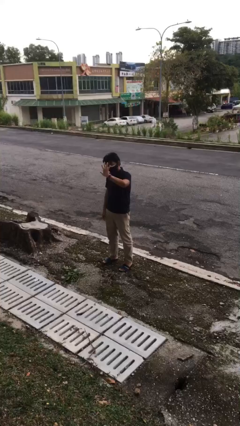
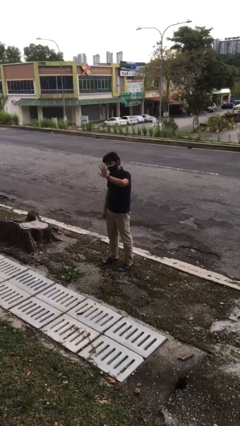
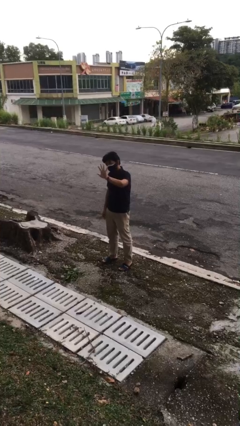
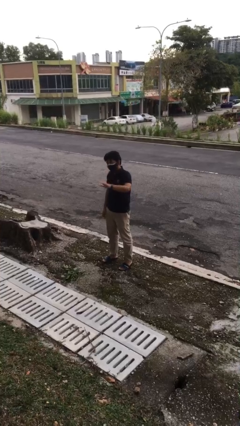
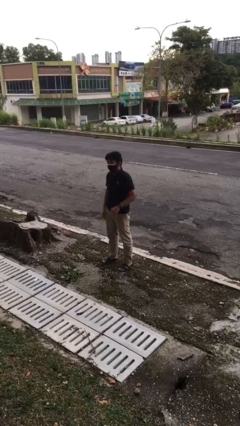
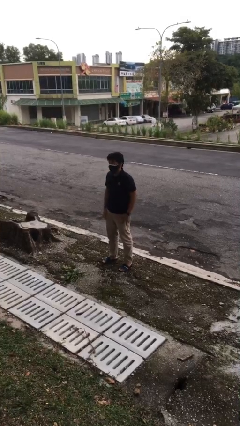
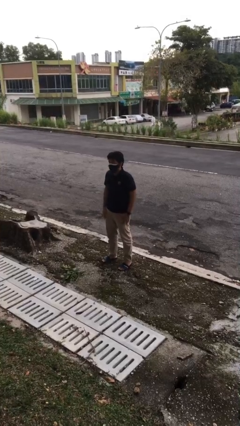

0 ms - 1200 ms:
person gestures number five

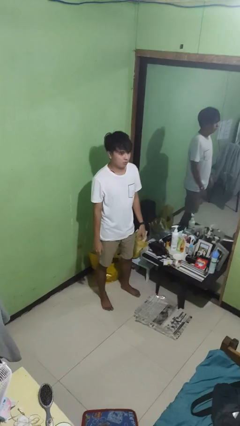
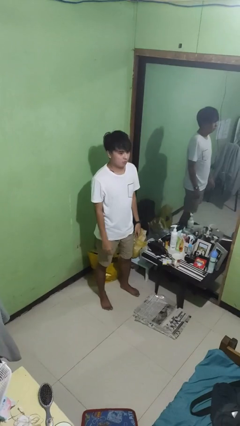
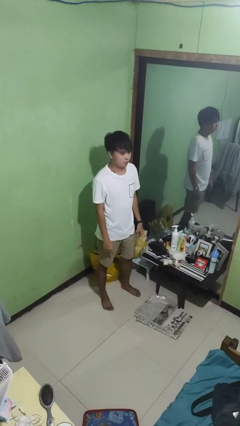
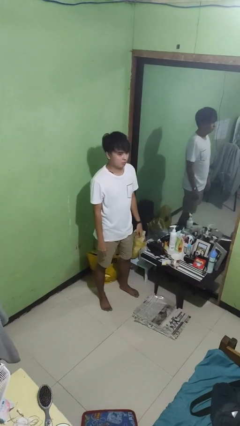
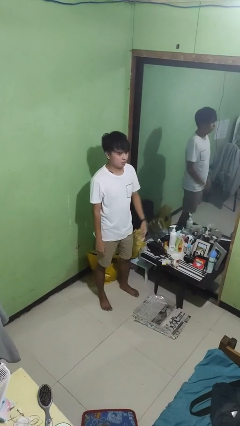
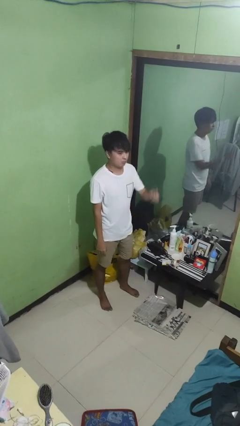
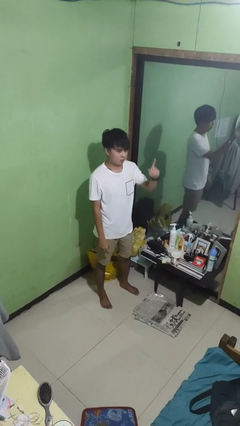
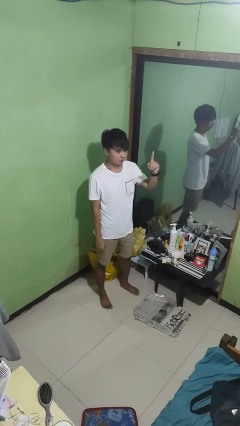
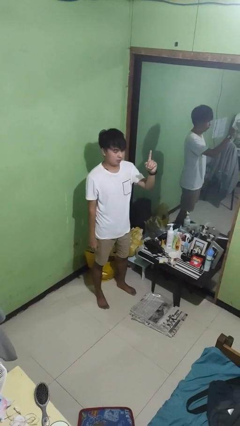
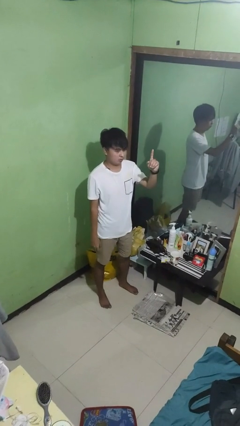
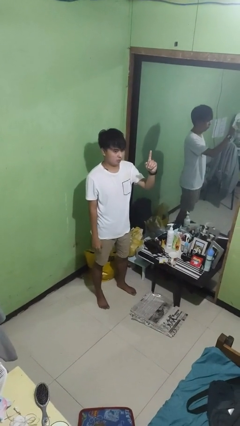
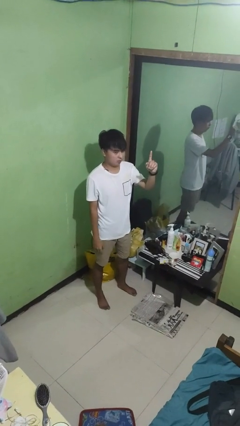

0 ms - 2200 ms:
person gestures number one

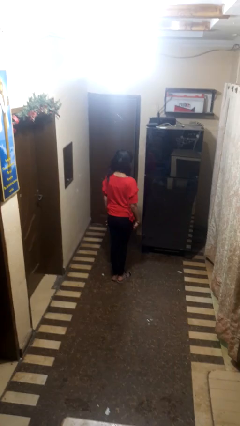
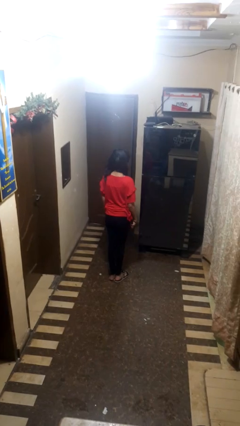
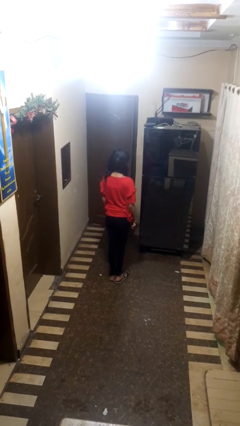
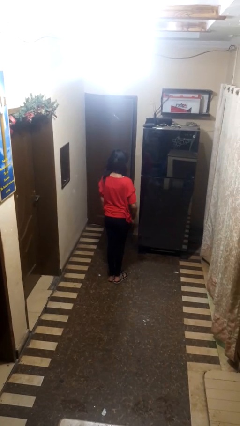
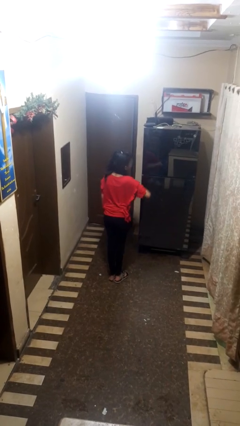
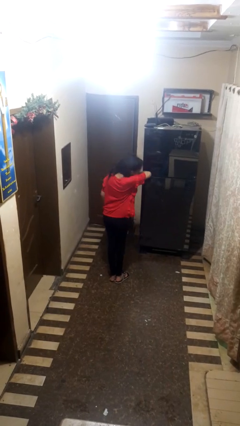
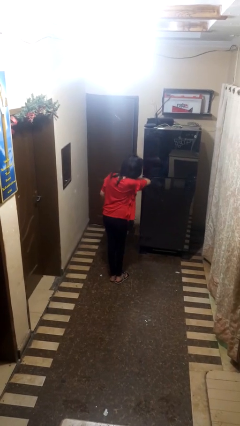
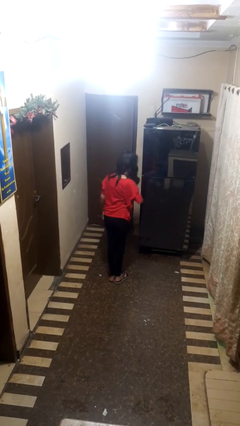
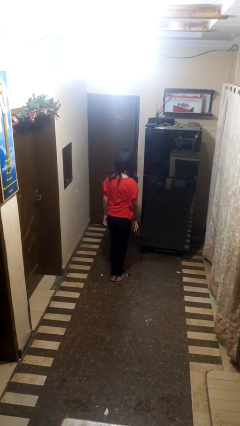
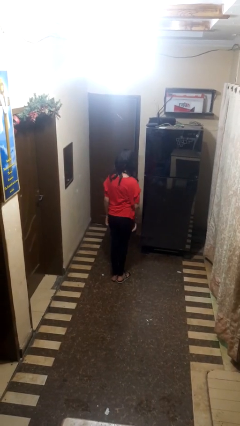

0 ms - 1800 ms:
person sneezes into arm

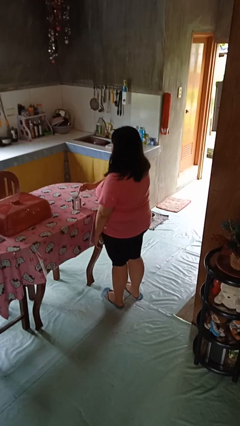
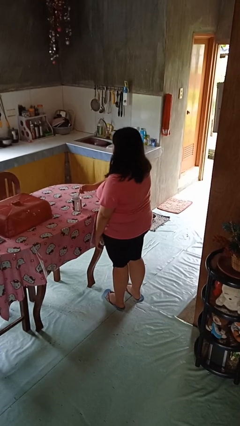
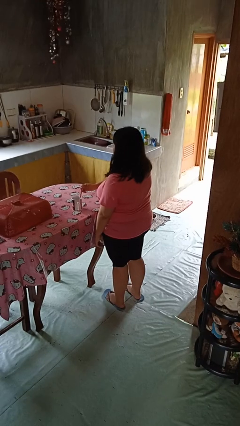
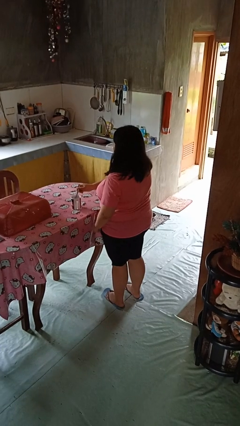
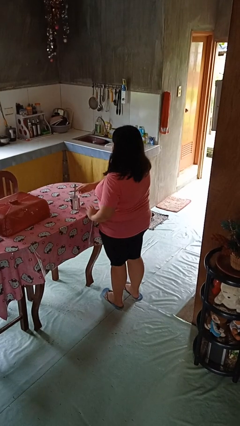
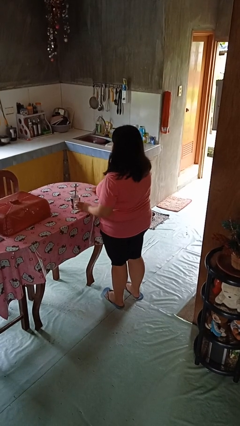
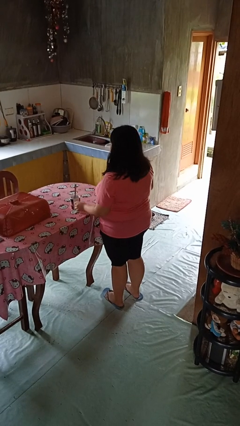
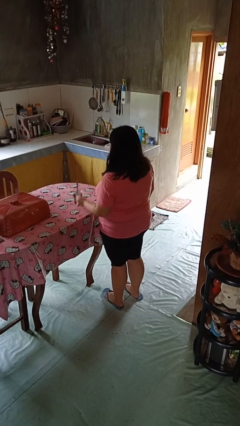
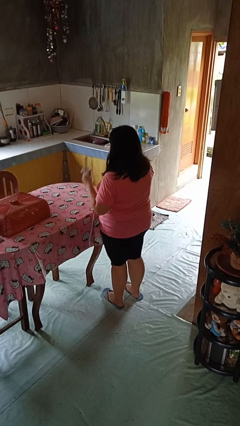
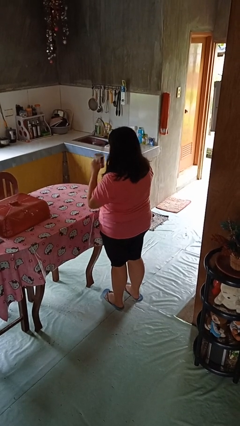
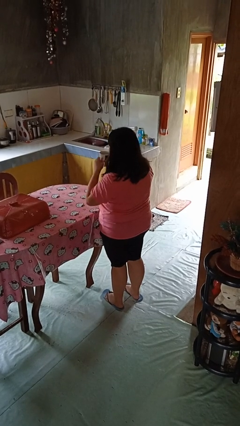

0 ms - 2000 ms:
person stirs mug

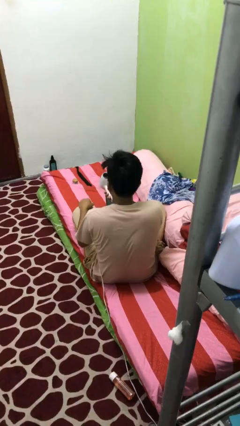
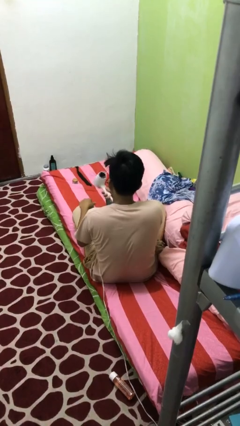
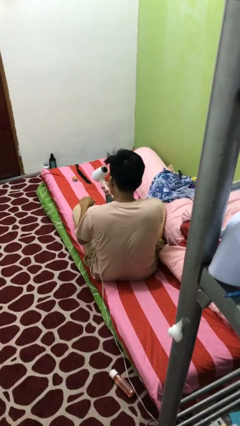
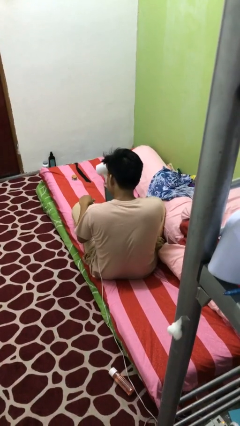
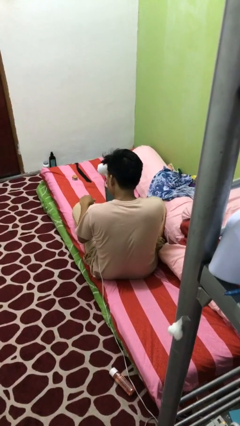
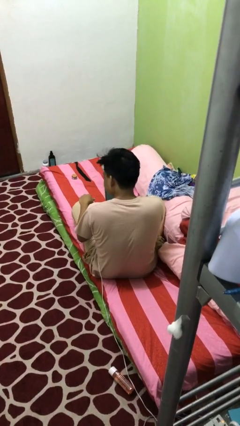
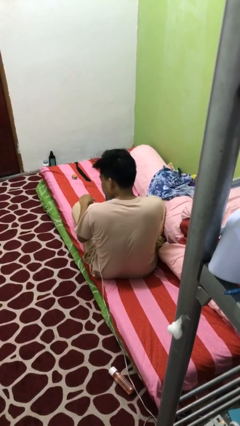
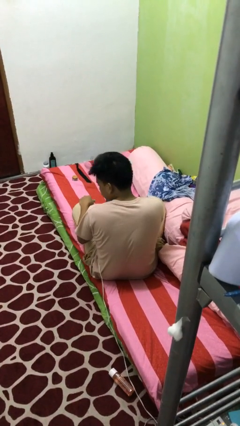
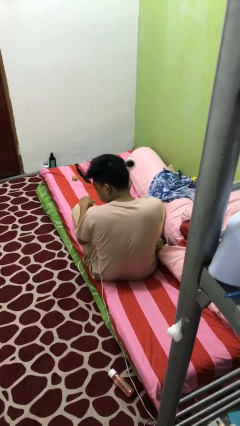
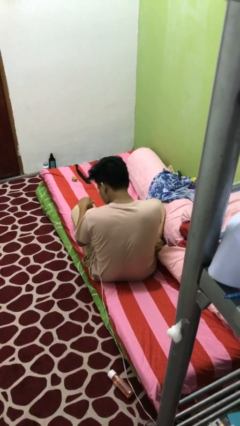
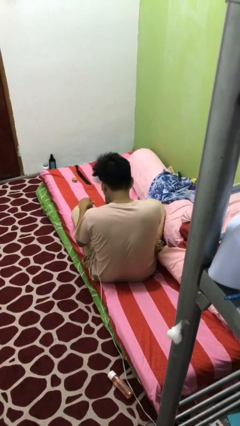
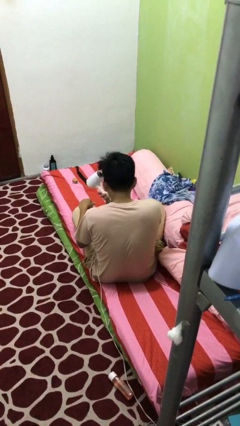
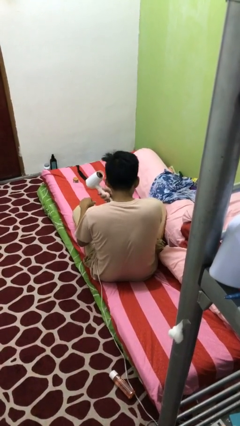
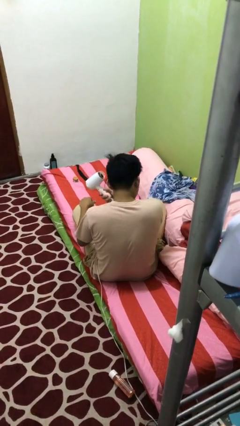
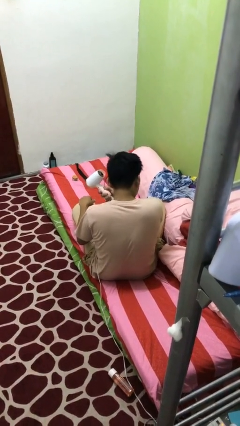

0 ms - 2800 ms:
person dries hair with hairdryer

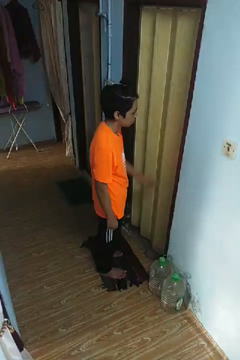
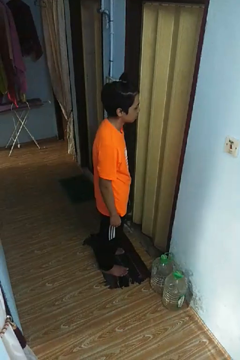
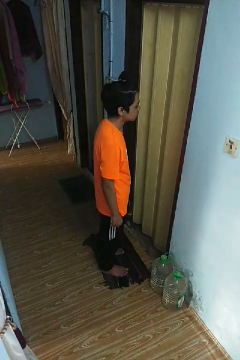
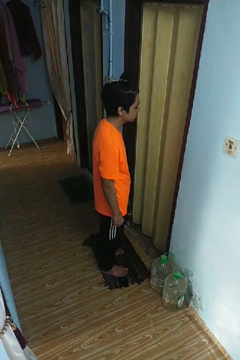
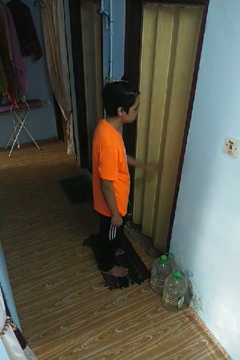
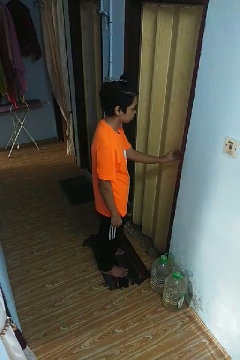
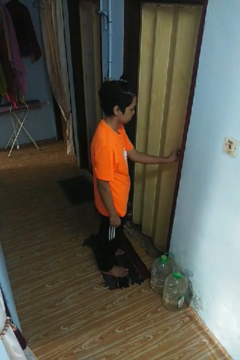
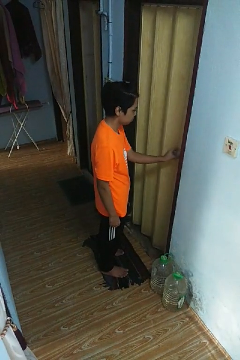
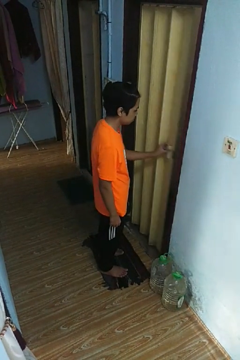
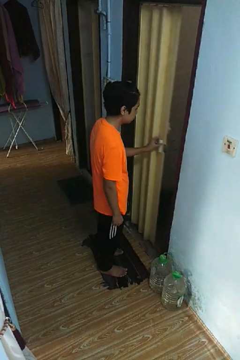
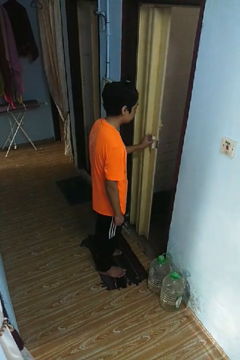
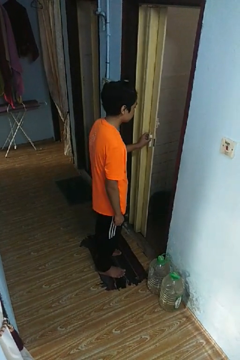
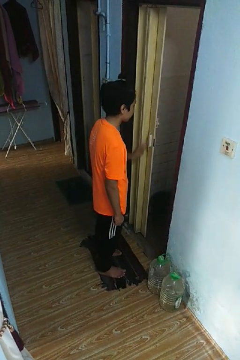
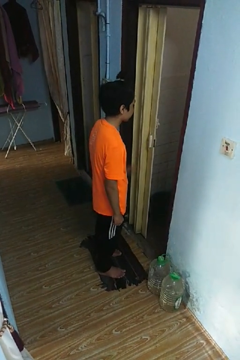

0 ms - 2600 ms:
person opens sliding door

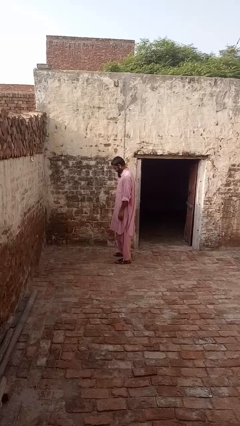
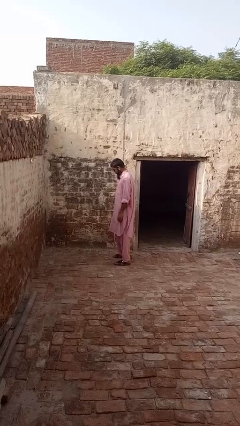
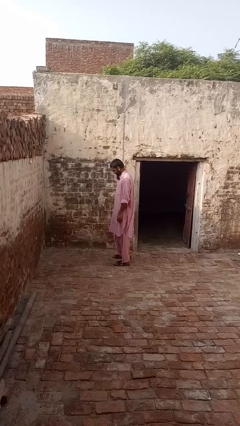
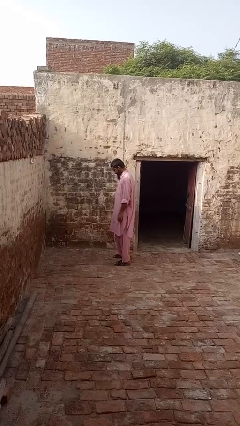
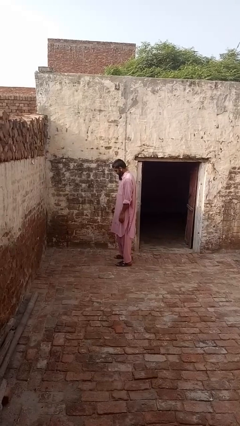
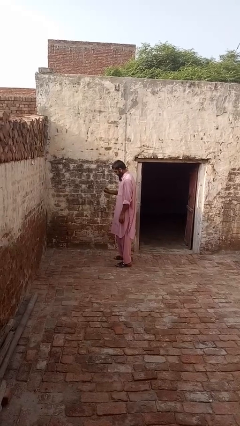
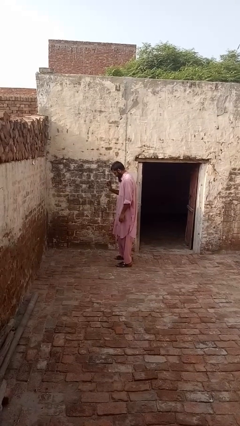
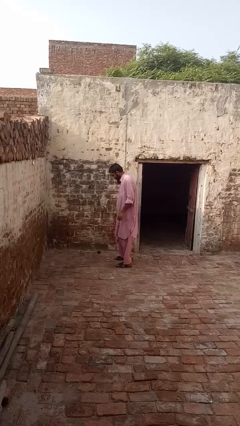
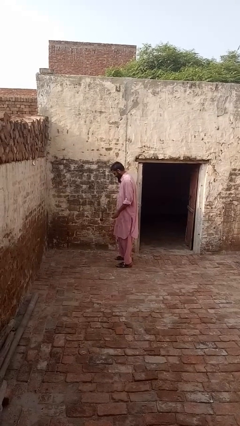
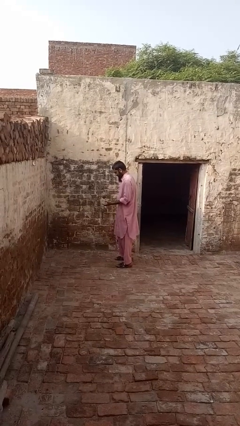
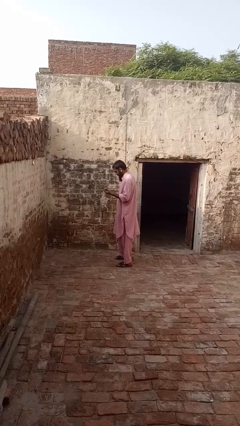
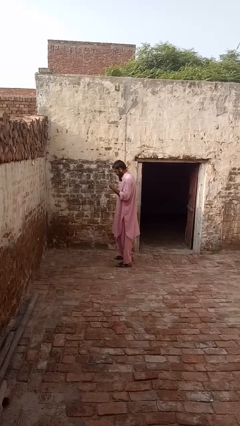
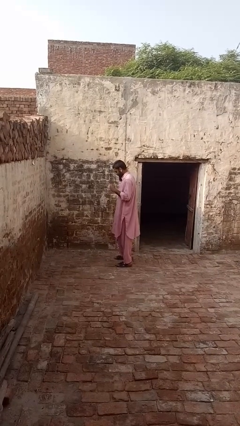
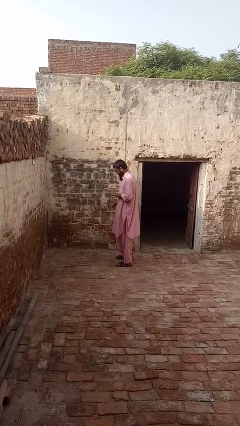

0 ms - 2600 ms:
person bounces ball on floor

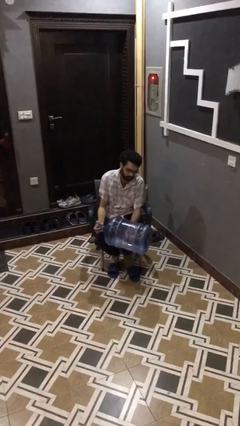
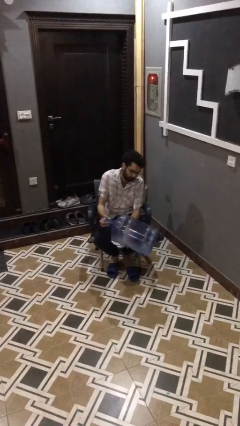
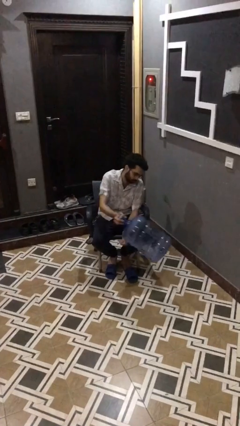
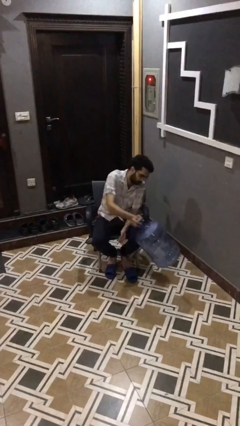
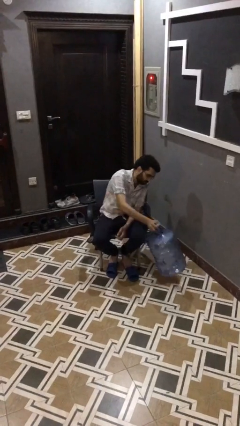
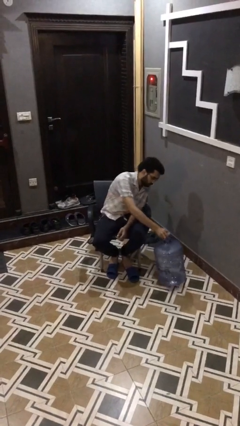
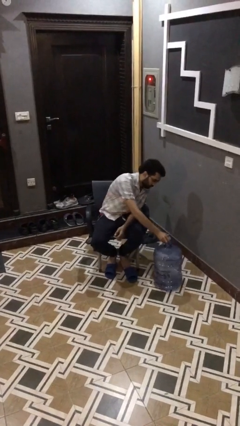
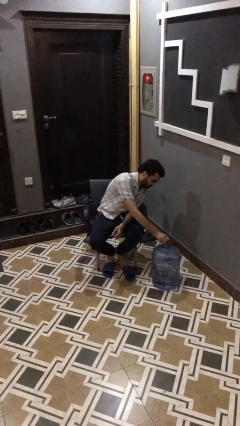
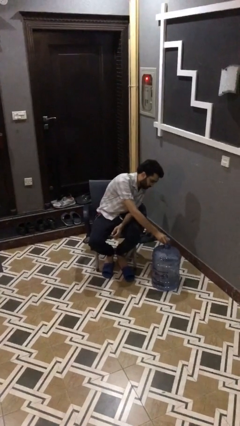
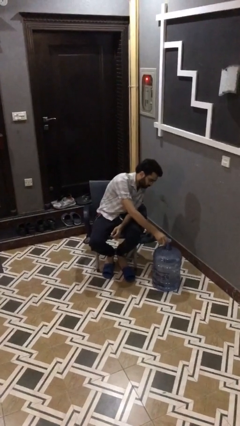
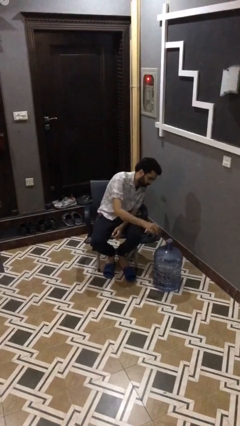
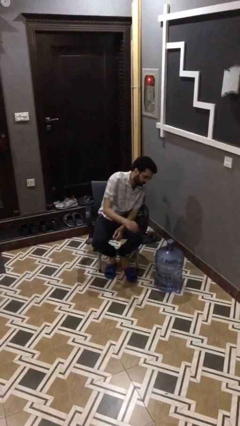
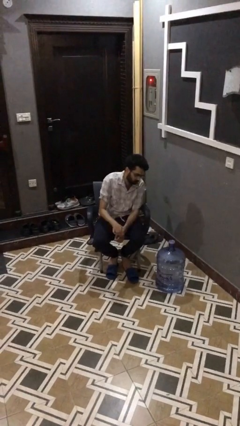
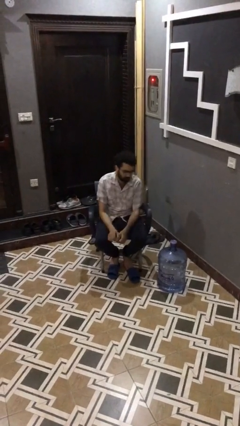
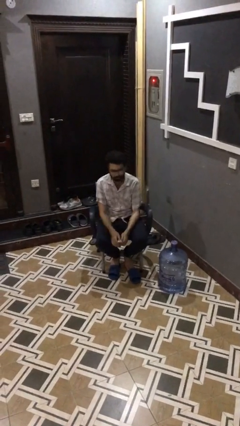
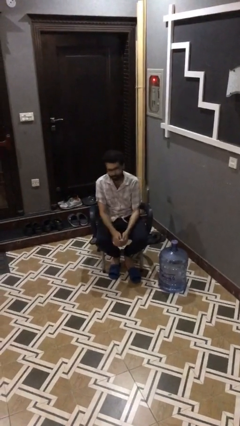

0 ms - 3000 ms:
person puts down object on floor
